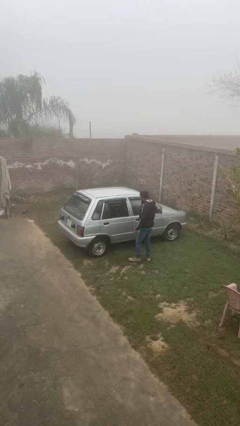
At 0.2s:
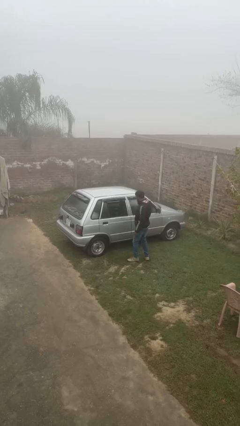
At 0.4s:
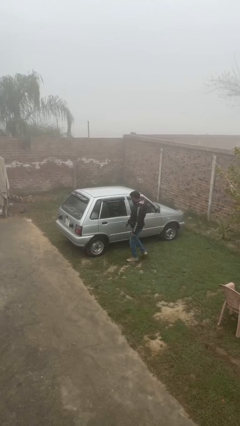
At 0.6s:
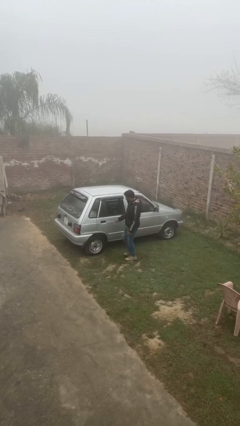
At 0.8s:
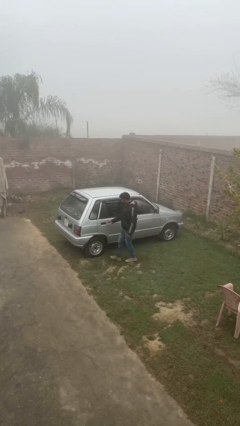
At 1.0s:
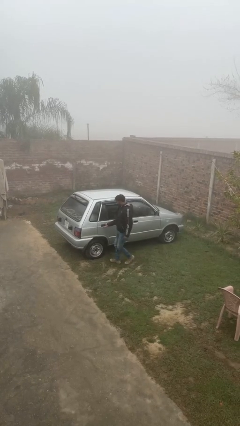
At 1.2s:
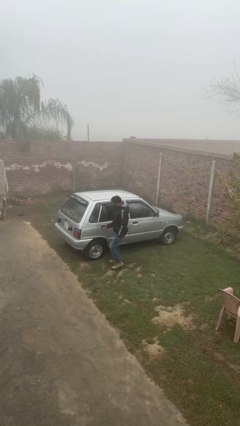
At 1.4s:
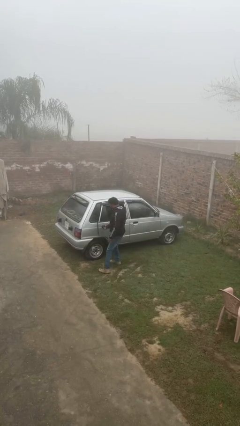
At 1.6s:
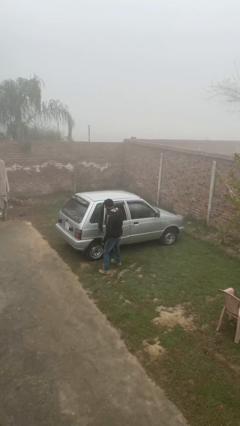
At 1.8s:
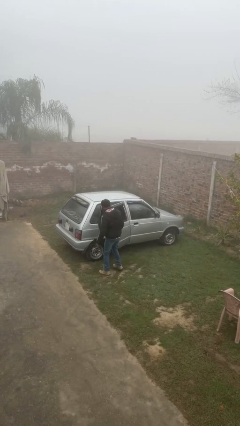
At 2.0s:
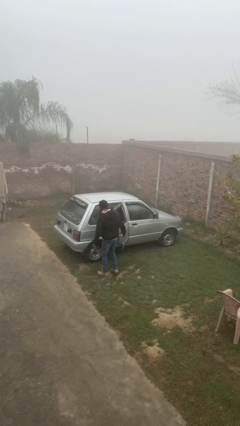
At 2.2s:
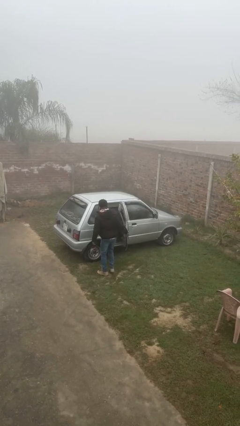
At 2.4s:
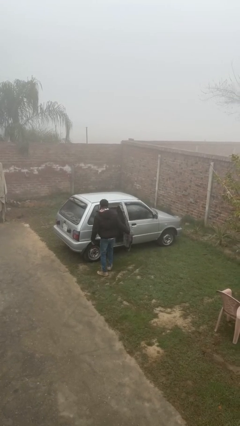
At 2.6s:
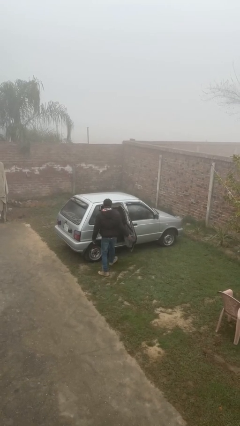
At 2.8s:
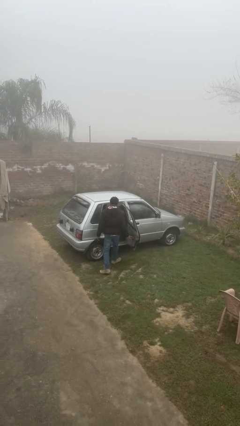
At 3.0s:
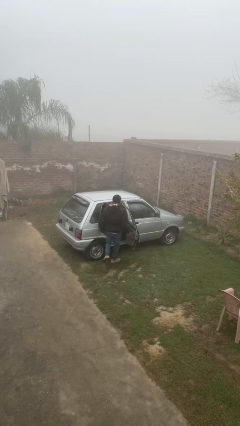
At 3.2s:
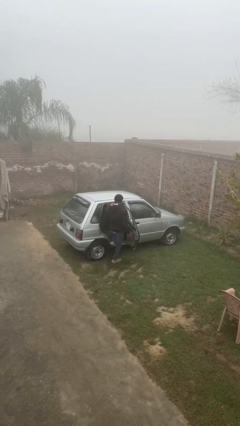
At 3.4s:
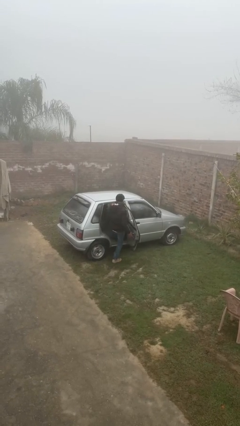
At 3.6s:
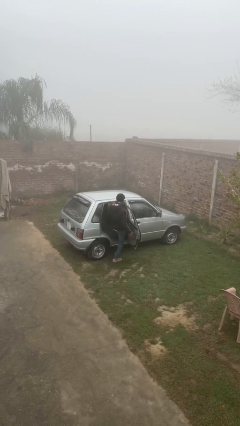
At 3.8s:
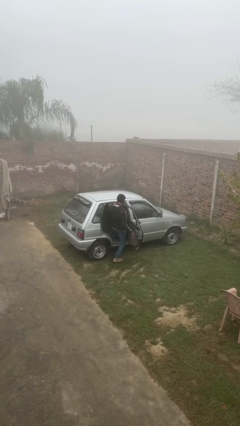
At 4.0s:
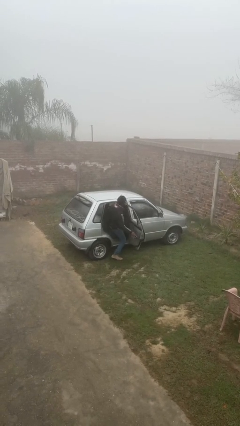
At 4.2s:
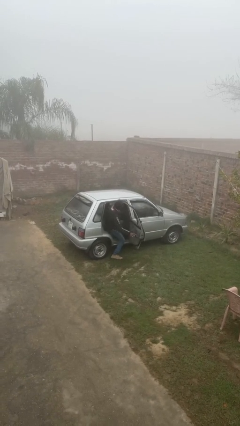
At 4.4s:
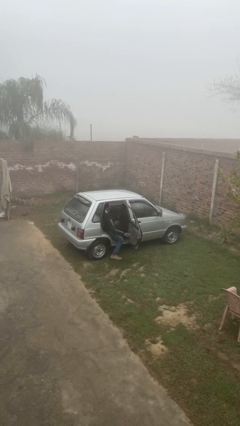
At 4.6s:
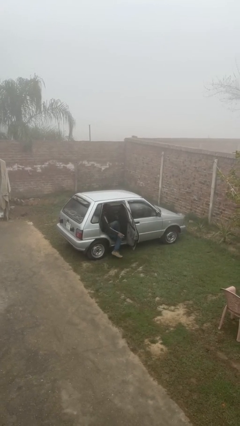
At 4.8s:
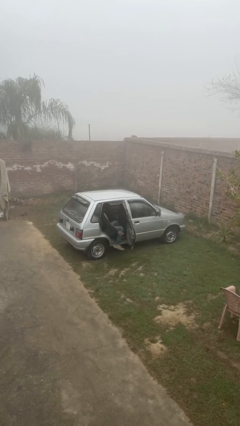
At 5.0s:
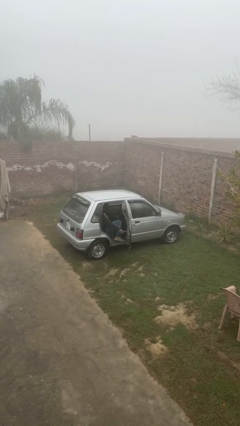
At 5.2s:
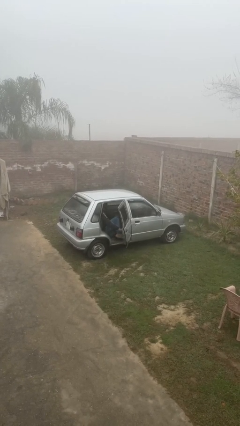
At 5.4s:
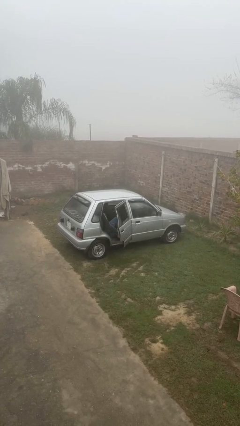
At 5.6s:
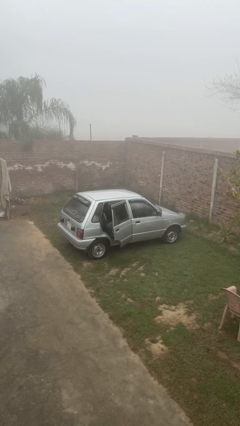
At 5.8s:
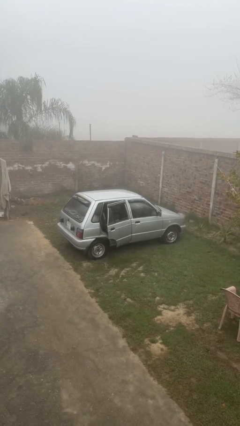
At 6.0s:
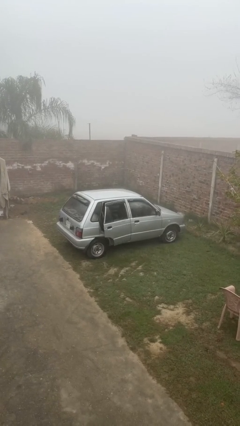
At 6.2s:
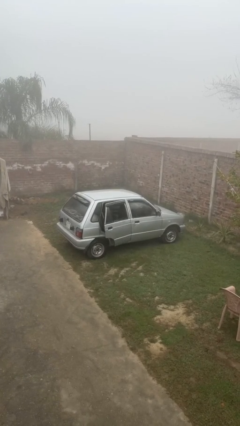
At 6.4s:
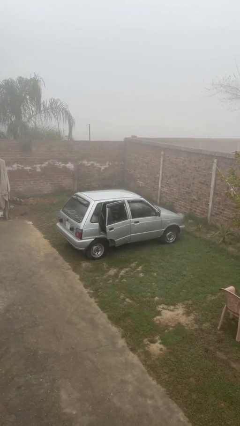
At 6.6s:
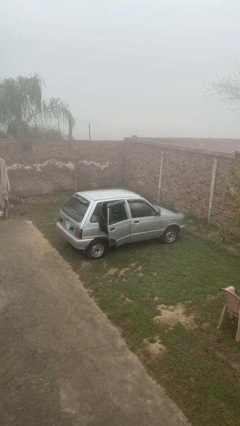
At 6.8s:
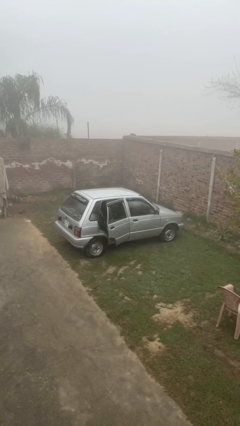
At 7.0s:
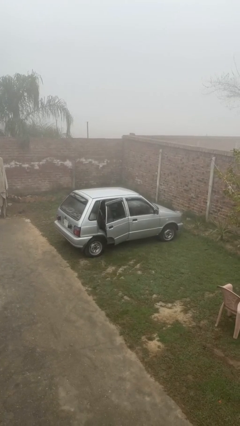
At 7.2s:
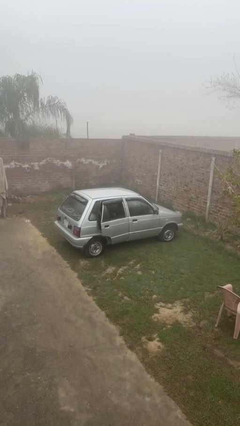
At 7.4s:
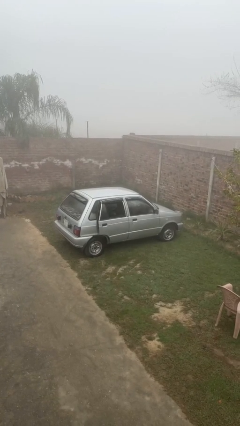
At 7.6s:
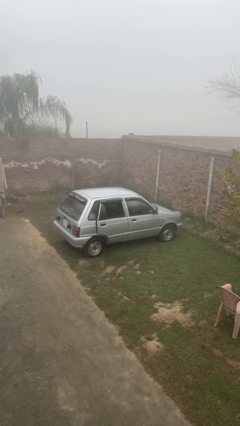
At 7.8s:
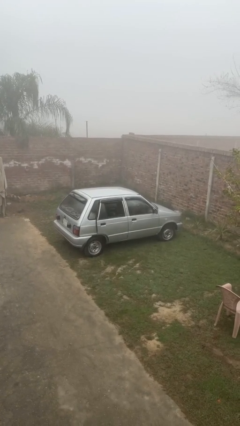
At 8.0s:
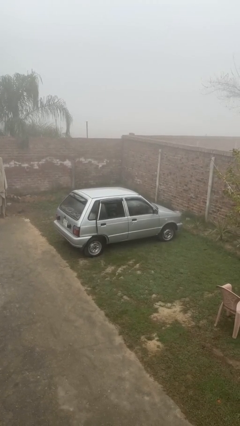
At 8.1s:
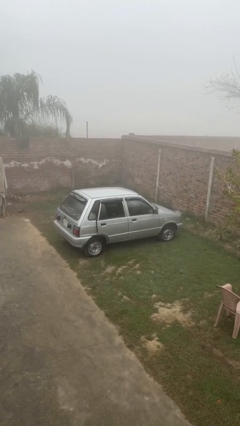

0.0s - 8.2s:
car picks up person

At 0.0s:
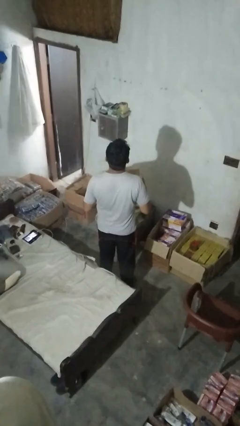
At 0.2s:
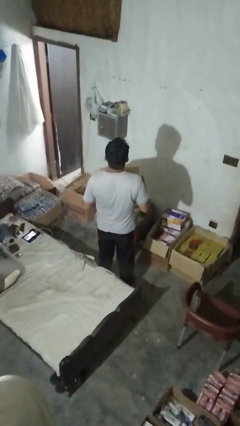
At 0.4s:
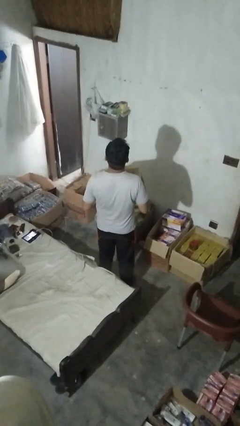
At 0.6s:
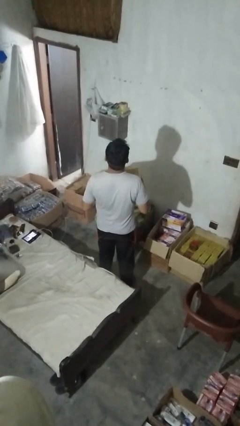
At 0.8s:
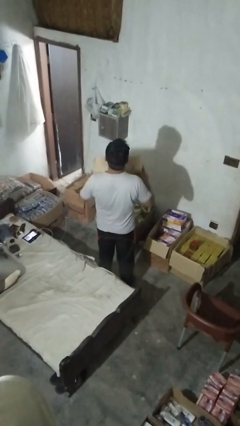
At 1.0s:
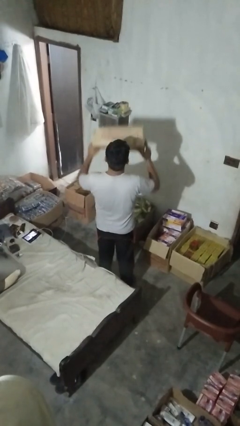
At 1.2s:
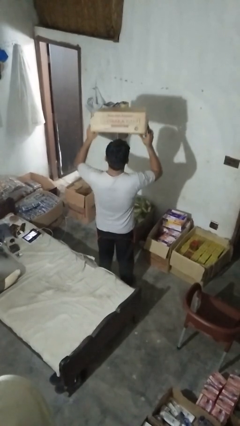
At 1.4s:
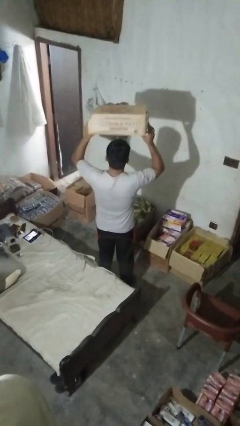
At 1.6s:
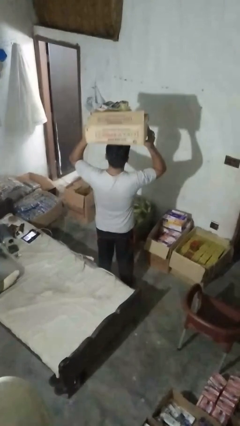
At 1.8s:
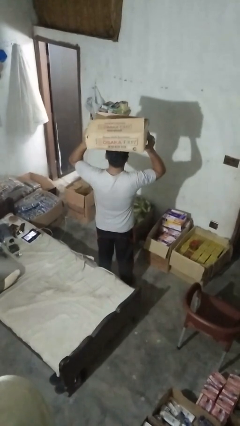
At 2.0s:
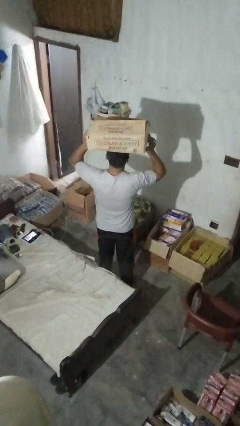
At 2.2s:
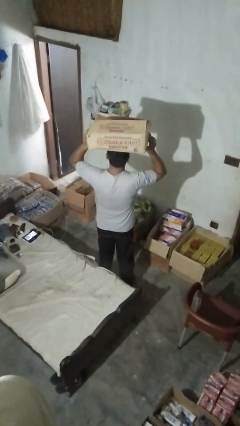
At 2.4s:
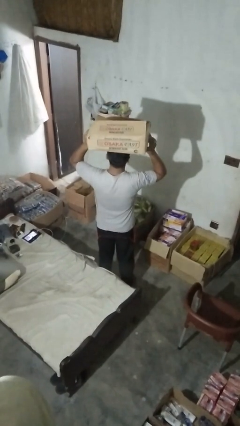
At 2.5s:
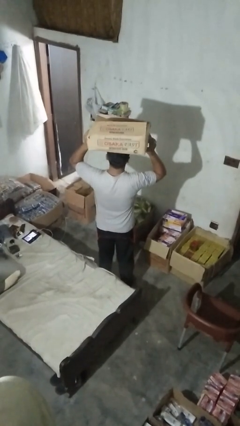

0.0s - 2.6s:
person holds object above head

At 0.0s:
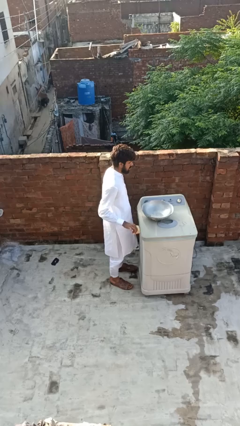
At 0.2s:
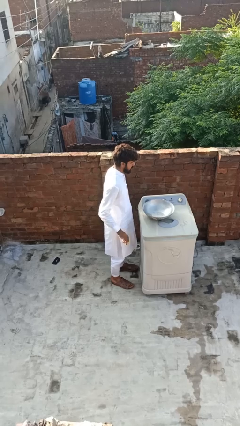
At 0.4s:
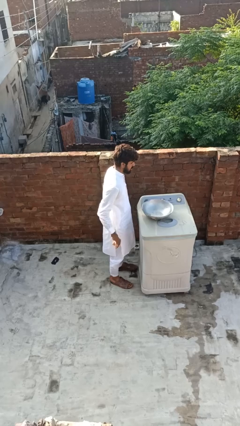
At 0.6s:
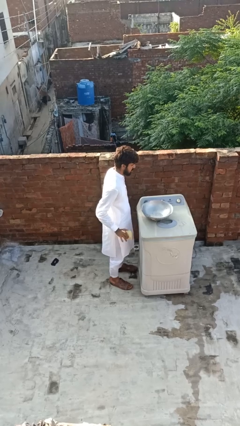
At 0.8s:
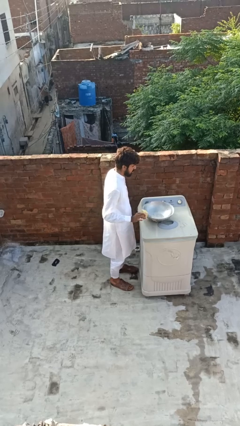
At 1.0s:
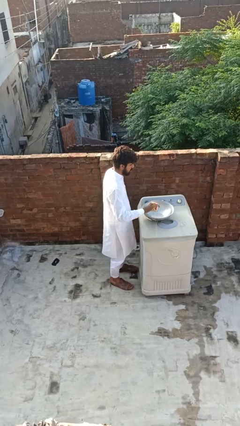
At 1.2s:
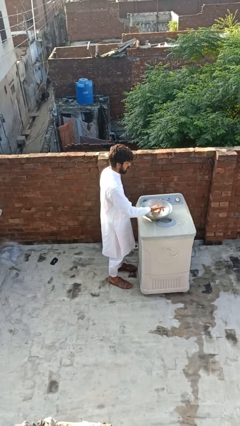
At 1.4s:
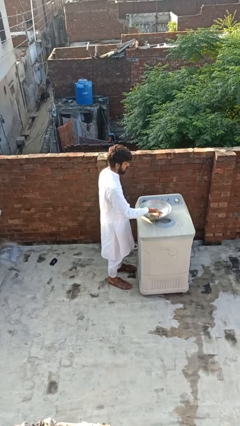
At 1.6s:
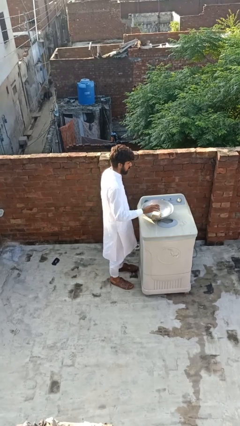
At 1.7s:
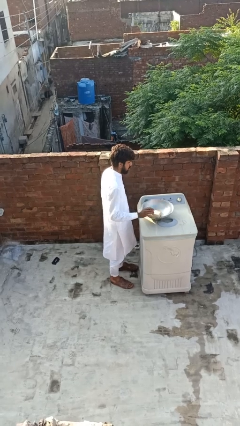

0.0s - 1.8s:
person pours into bowl

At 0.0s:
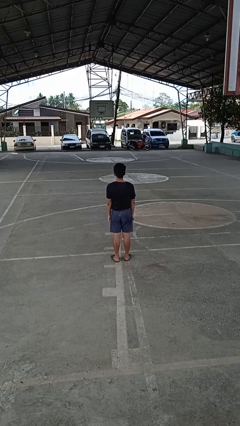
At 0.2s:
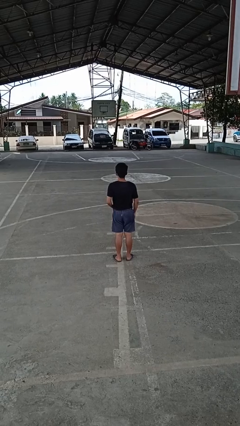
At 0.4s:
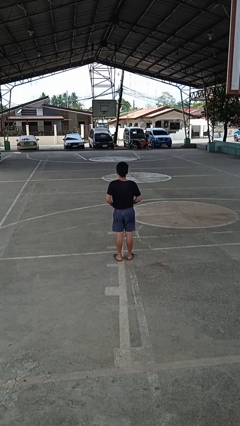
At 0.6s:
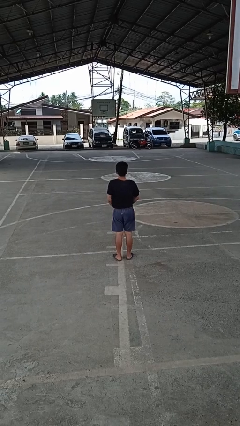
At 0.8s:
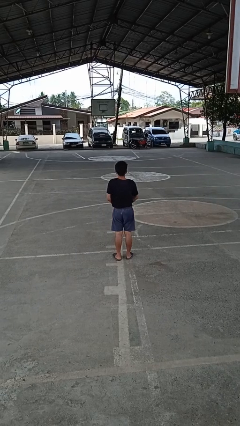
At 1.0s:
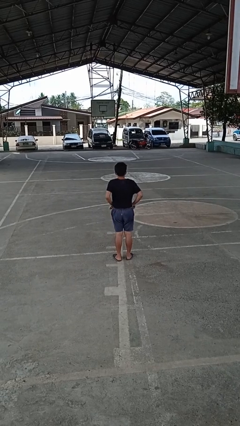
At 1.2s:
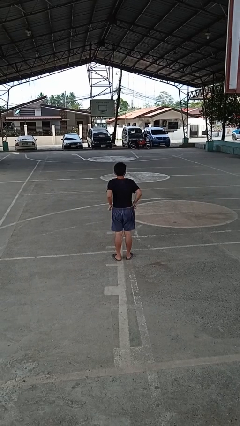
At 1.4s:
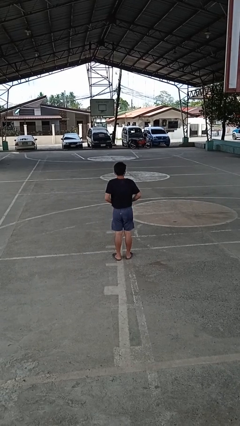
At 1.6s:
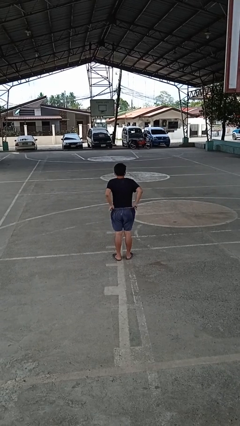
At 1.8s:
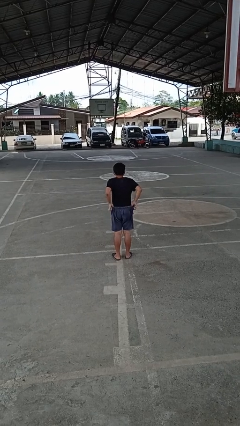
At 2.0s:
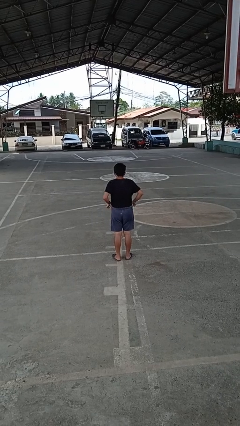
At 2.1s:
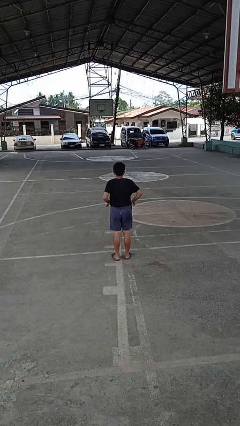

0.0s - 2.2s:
person hikes up pants

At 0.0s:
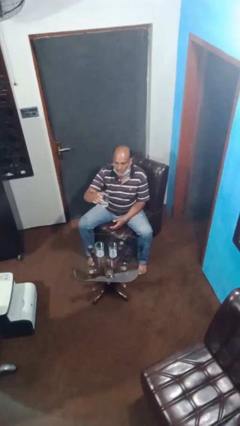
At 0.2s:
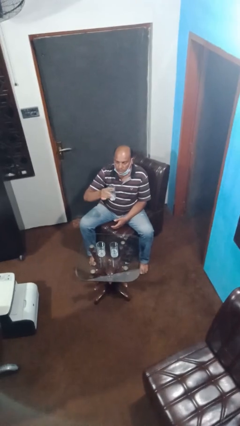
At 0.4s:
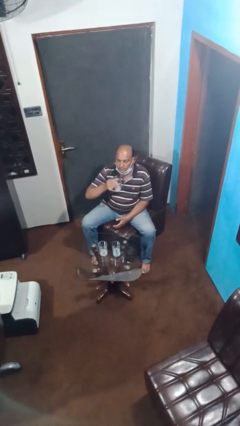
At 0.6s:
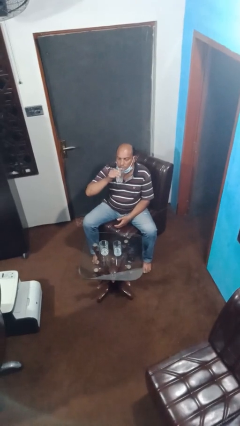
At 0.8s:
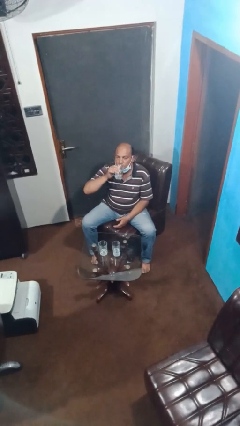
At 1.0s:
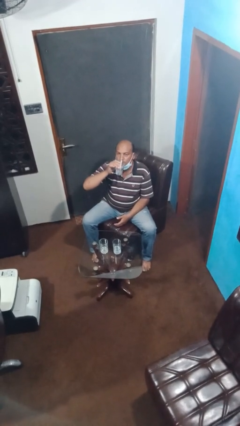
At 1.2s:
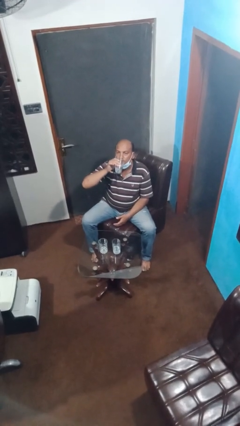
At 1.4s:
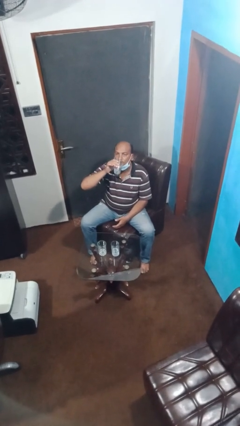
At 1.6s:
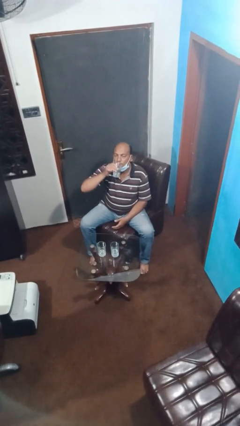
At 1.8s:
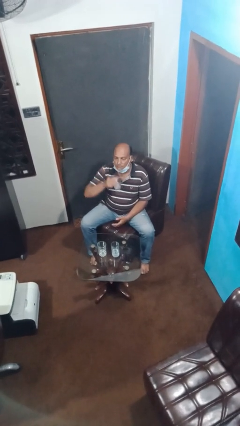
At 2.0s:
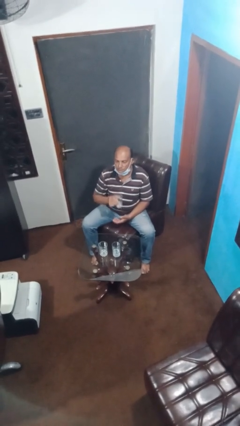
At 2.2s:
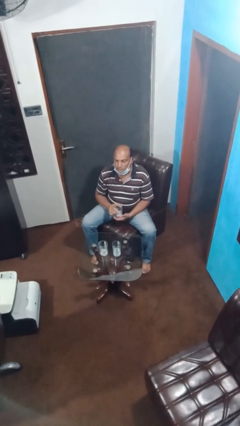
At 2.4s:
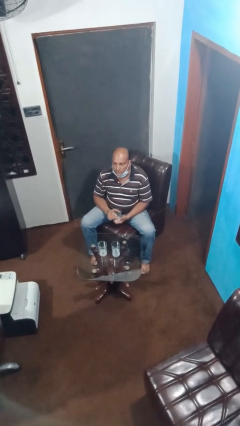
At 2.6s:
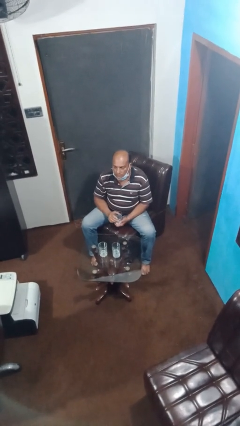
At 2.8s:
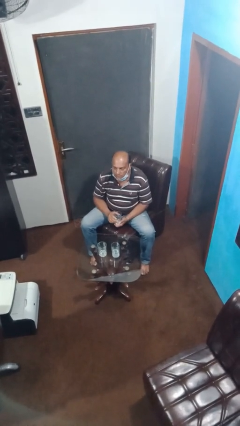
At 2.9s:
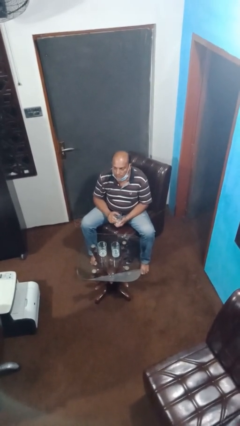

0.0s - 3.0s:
person drinks from shotglass
